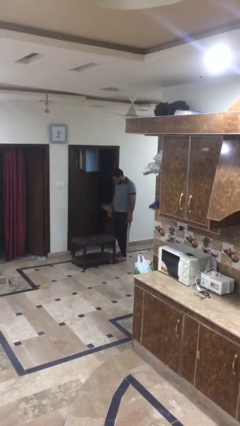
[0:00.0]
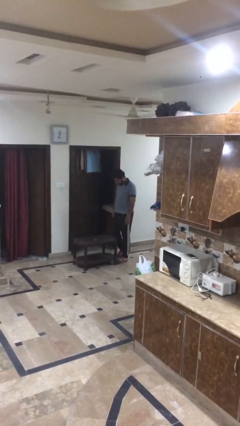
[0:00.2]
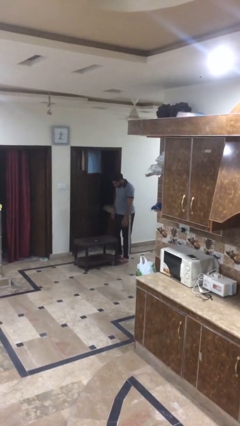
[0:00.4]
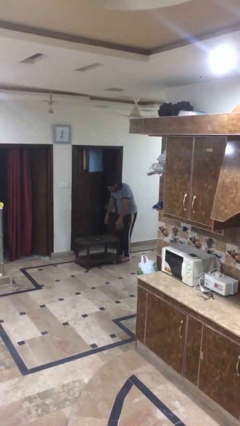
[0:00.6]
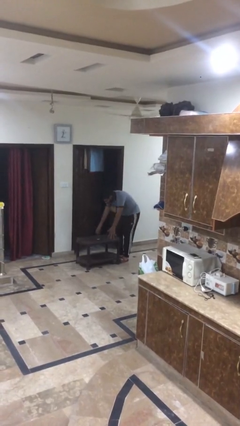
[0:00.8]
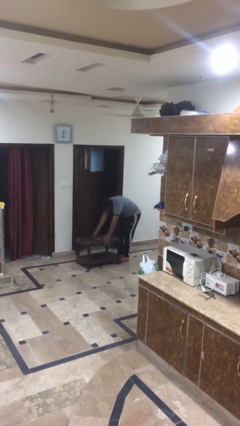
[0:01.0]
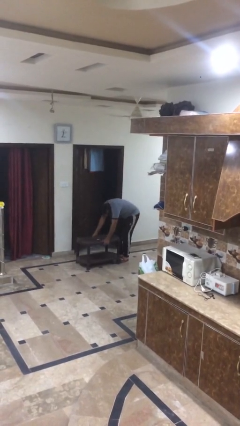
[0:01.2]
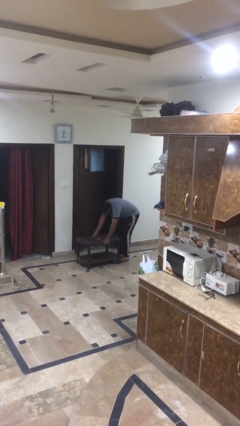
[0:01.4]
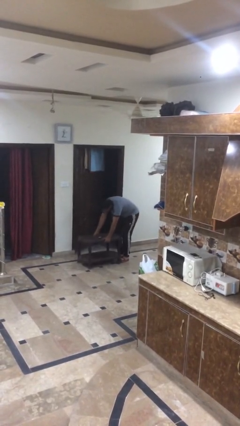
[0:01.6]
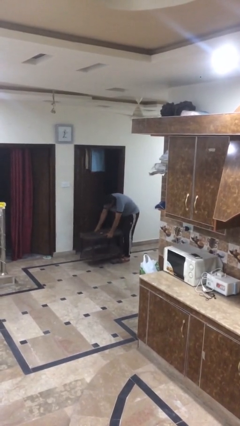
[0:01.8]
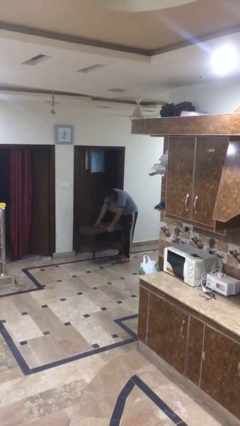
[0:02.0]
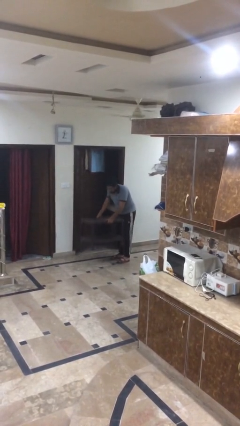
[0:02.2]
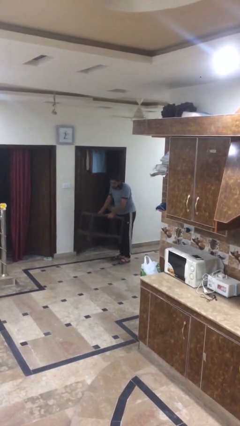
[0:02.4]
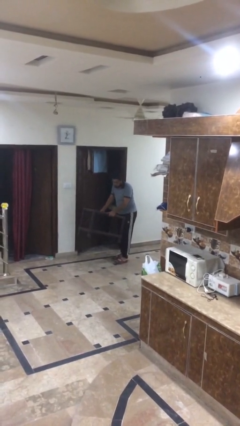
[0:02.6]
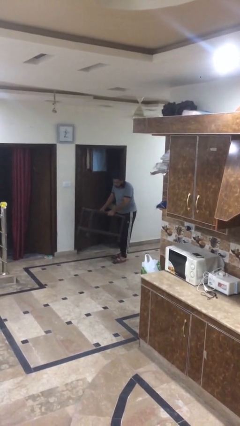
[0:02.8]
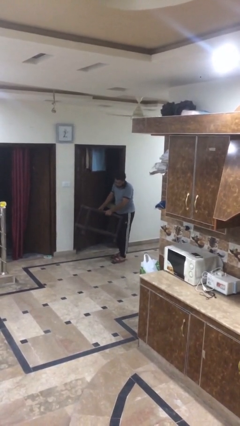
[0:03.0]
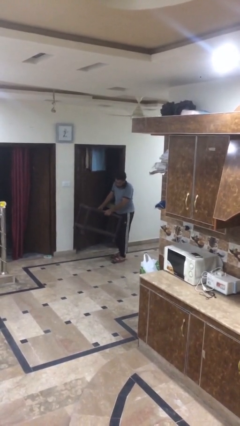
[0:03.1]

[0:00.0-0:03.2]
person picks up object from floor

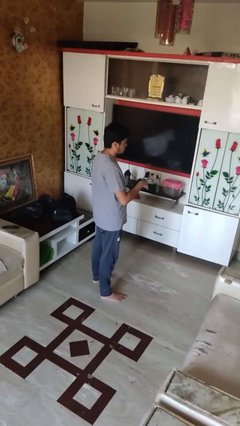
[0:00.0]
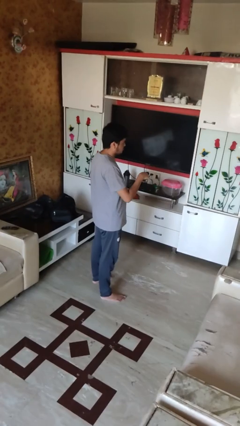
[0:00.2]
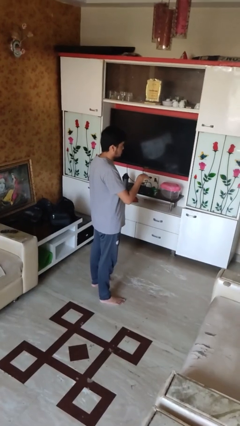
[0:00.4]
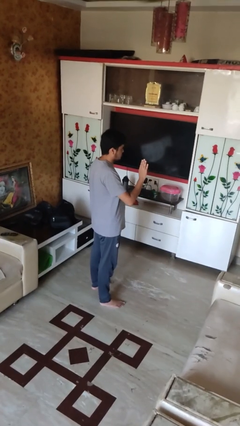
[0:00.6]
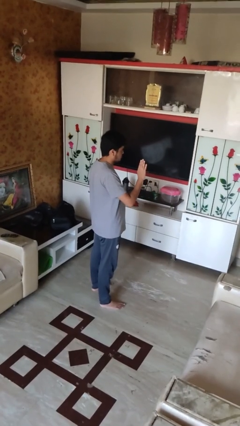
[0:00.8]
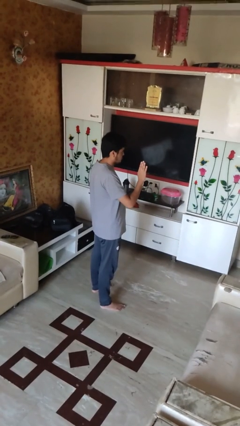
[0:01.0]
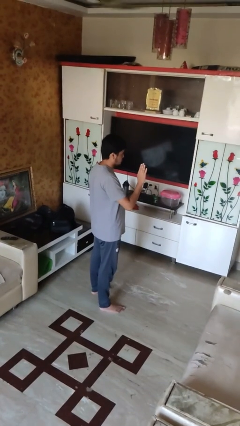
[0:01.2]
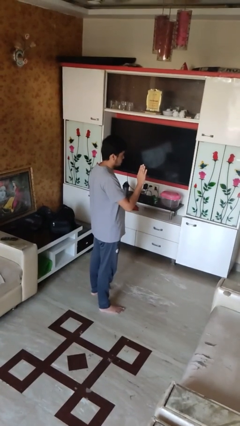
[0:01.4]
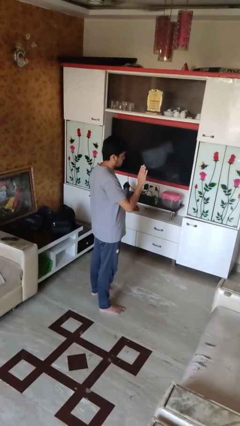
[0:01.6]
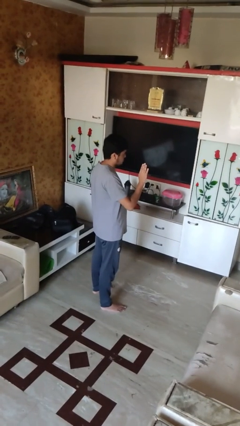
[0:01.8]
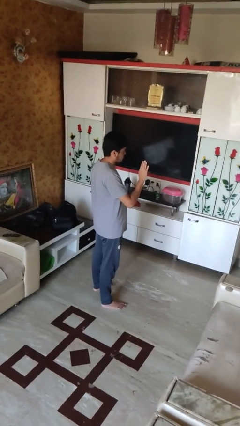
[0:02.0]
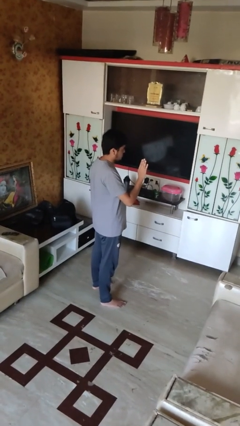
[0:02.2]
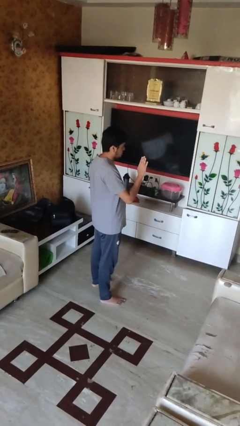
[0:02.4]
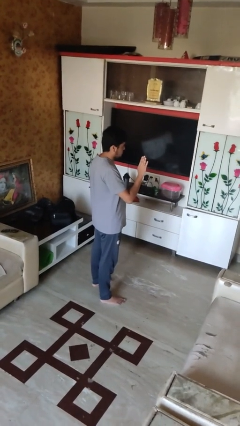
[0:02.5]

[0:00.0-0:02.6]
person gestures swipe up

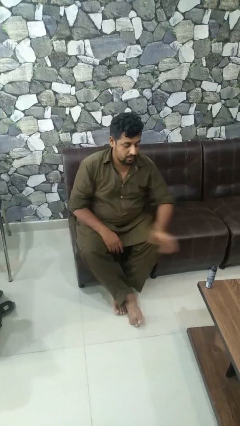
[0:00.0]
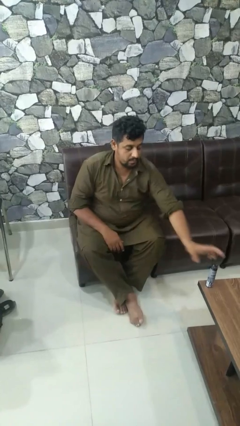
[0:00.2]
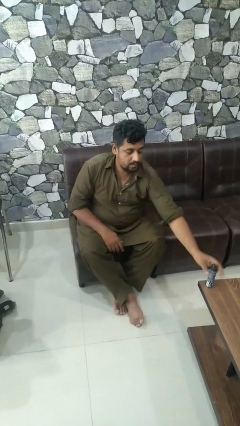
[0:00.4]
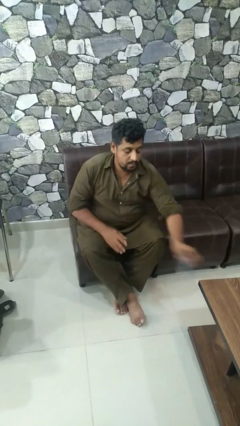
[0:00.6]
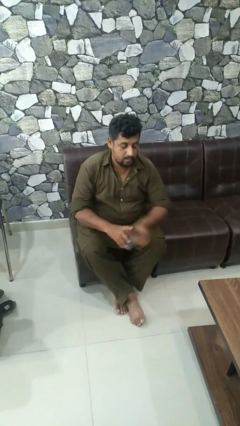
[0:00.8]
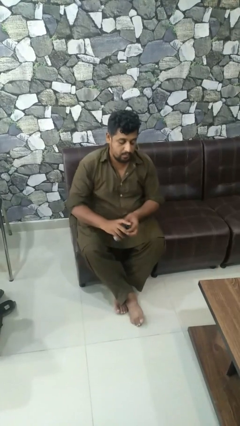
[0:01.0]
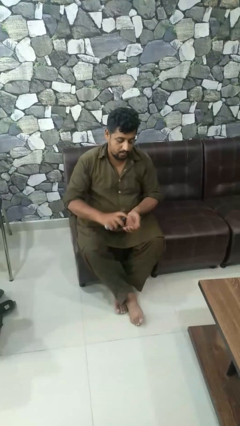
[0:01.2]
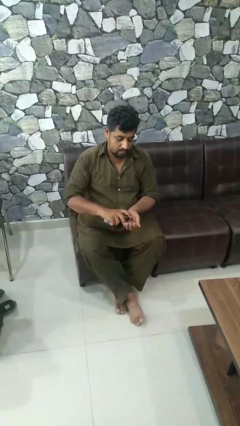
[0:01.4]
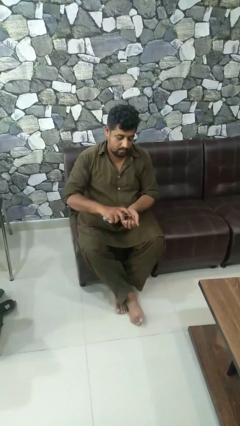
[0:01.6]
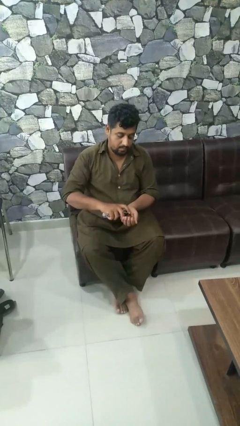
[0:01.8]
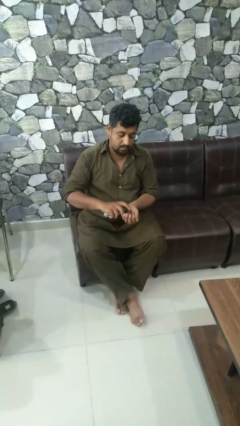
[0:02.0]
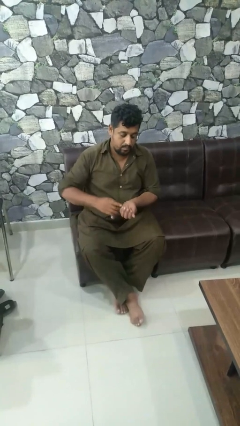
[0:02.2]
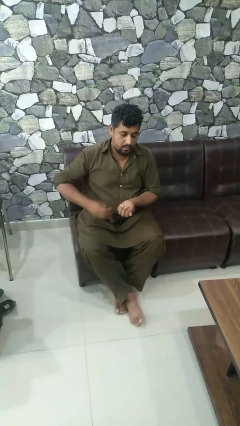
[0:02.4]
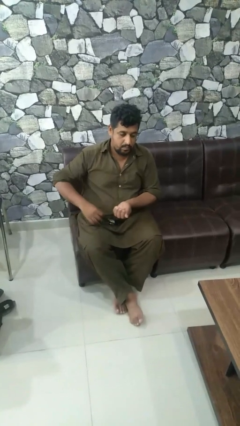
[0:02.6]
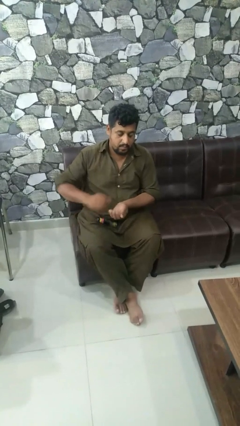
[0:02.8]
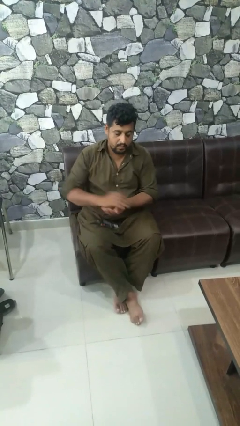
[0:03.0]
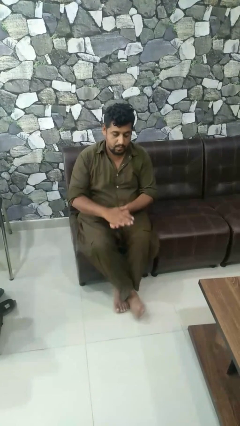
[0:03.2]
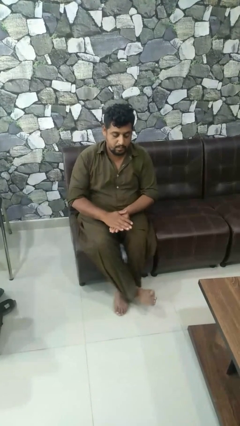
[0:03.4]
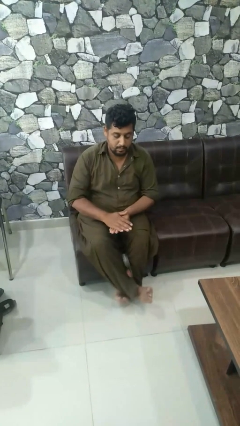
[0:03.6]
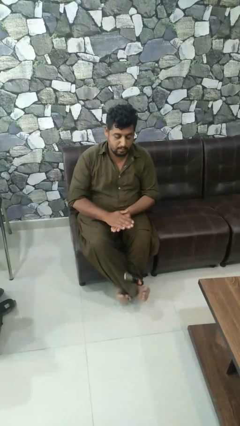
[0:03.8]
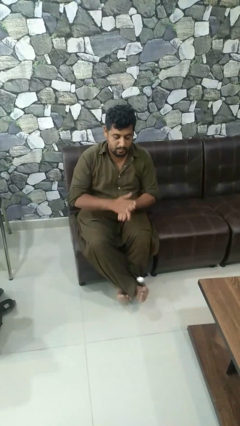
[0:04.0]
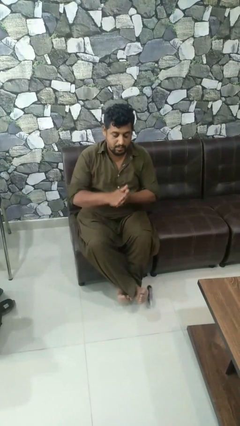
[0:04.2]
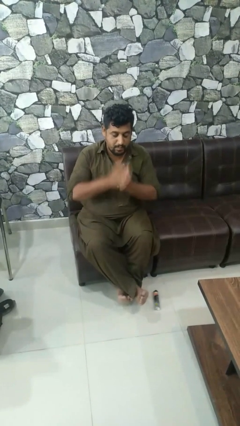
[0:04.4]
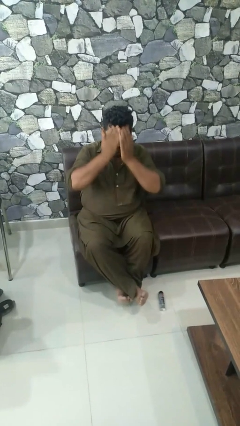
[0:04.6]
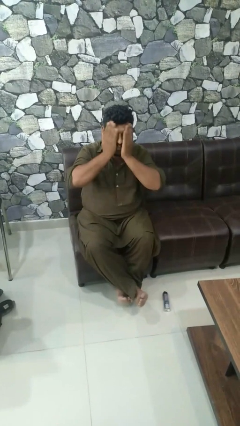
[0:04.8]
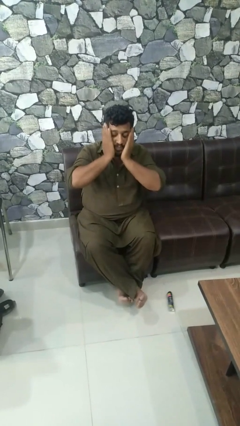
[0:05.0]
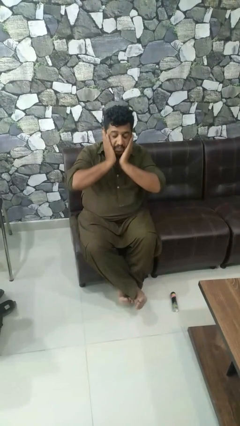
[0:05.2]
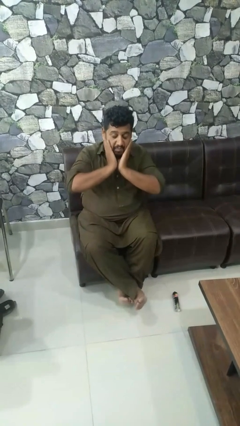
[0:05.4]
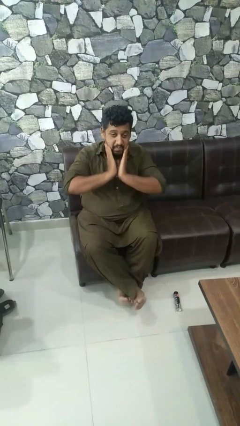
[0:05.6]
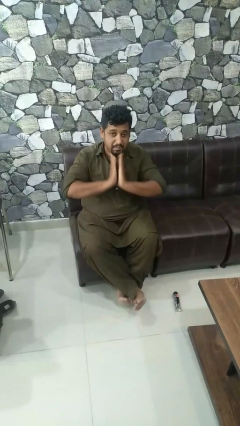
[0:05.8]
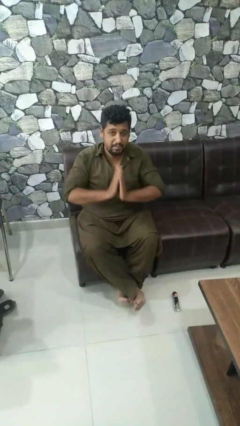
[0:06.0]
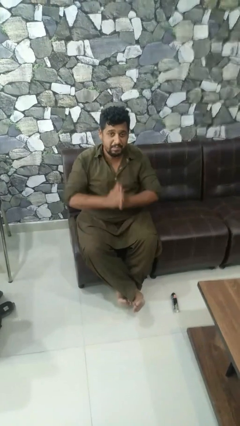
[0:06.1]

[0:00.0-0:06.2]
person applies sunscreen

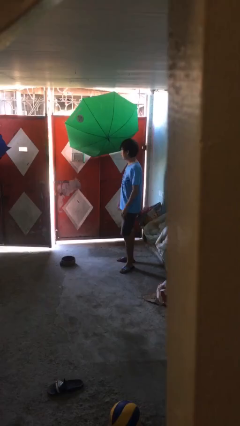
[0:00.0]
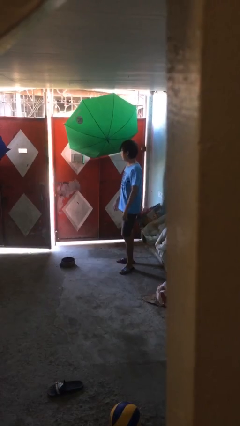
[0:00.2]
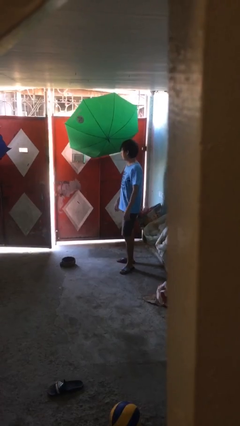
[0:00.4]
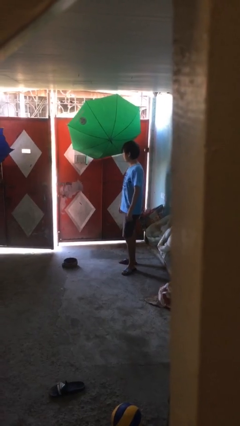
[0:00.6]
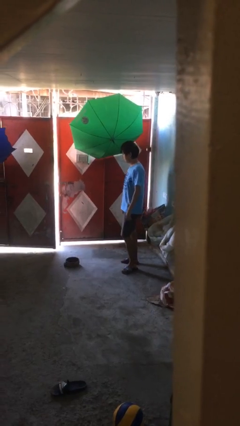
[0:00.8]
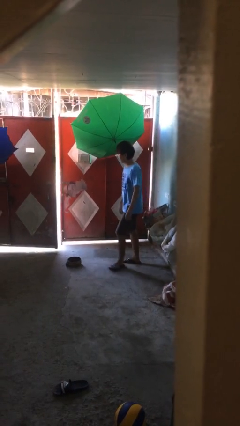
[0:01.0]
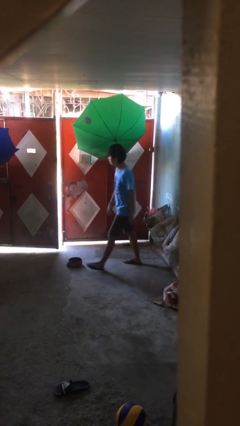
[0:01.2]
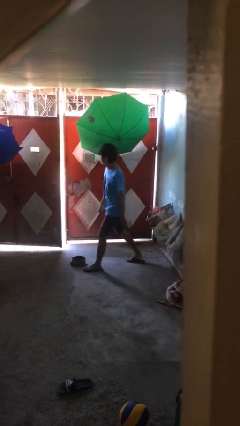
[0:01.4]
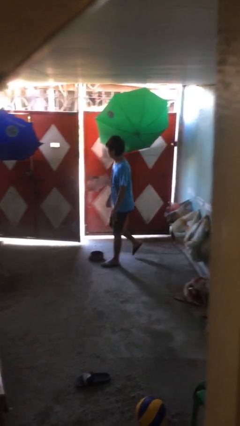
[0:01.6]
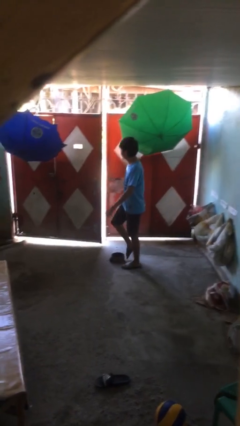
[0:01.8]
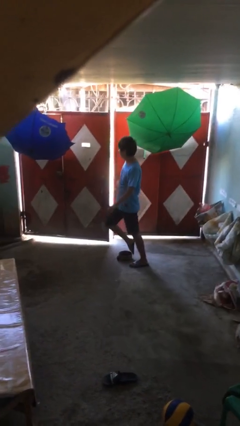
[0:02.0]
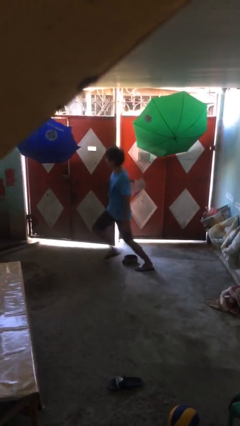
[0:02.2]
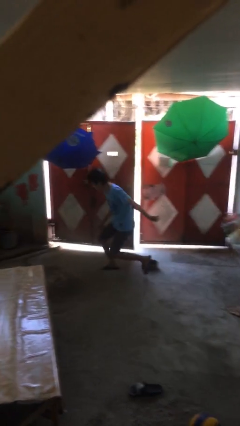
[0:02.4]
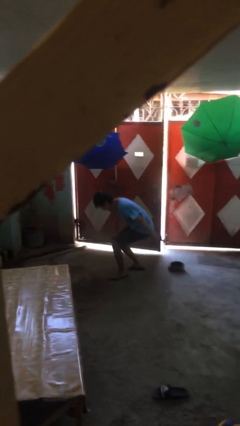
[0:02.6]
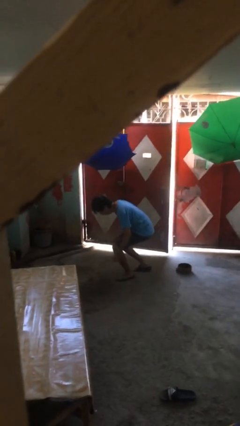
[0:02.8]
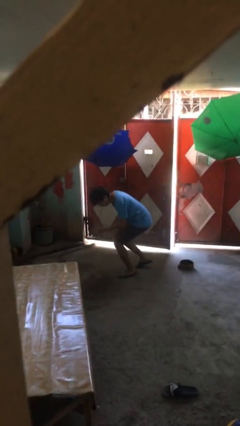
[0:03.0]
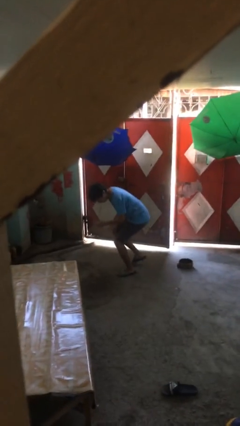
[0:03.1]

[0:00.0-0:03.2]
person trips on object on floor

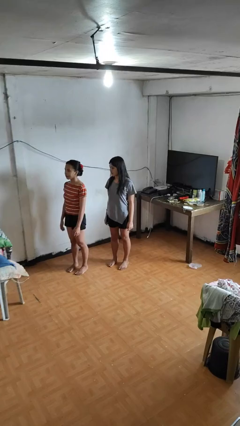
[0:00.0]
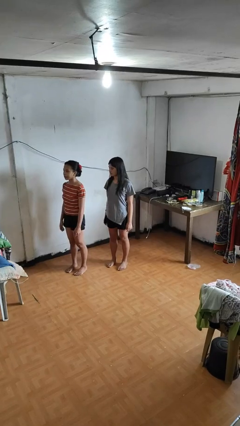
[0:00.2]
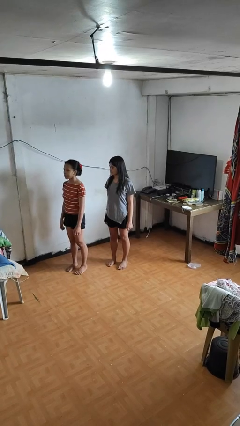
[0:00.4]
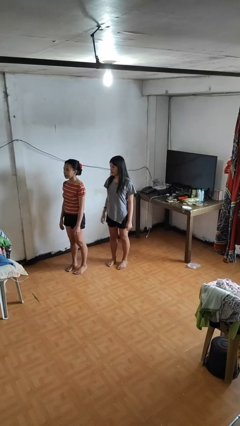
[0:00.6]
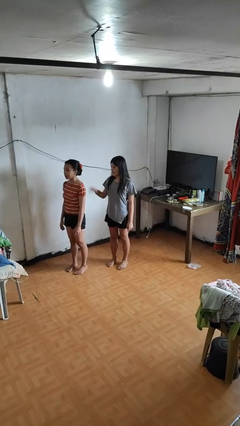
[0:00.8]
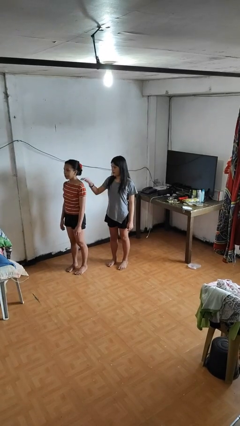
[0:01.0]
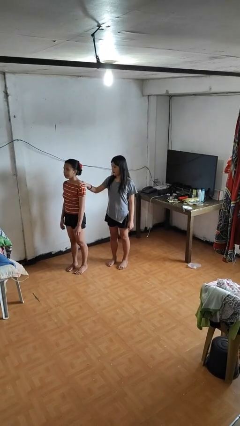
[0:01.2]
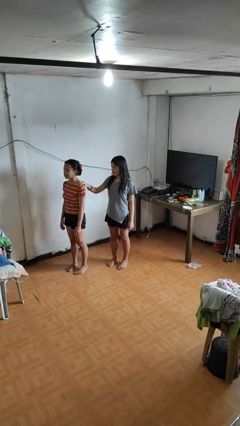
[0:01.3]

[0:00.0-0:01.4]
person grabs person by shoulder

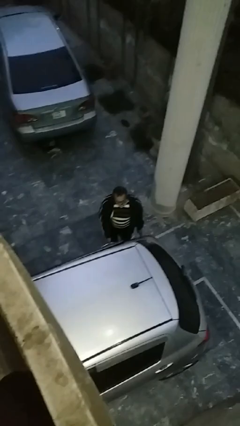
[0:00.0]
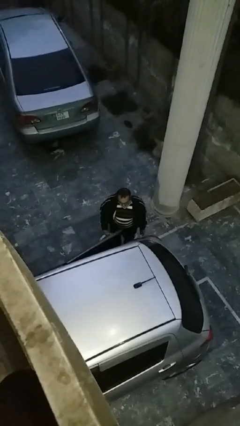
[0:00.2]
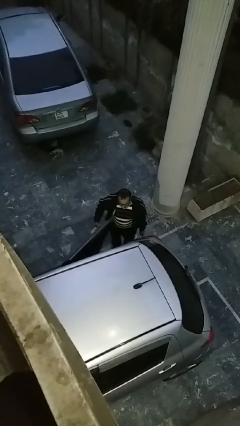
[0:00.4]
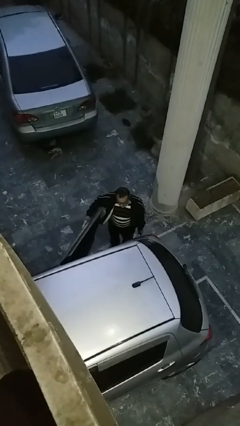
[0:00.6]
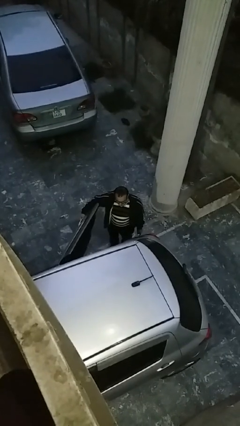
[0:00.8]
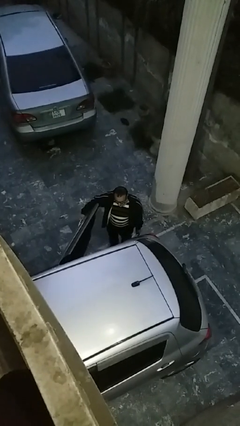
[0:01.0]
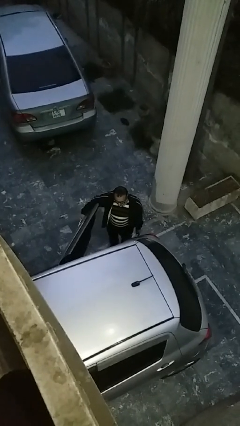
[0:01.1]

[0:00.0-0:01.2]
person opens car door
